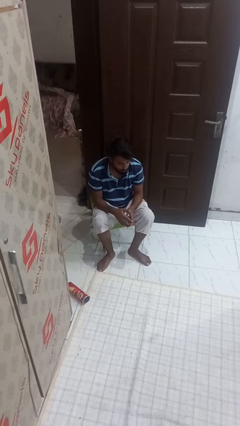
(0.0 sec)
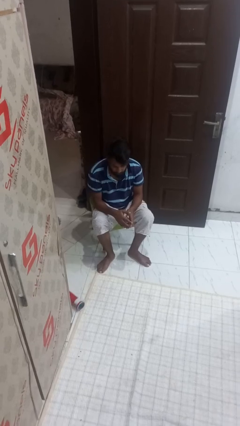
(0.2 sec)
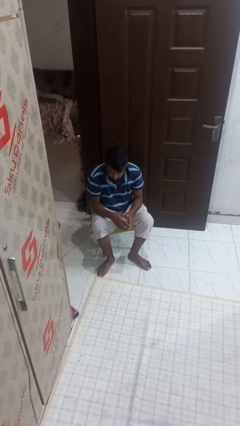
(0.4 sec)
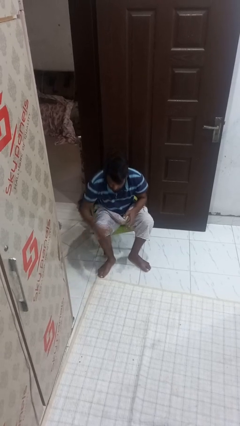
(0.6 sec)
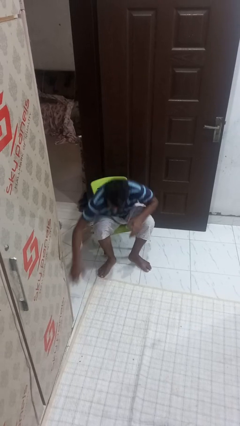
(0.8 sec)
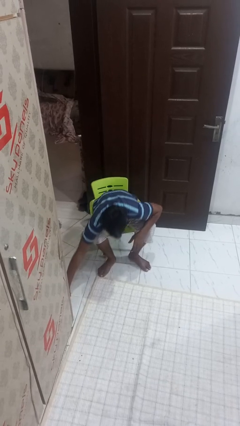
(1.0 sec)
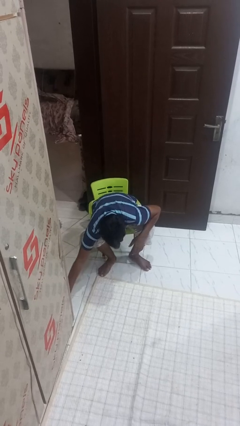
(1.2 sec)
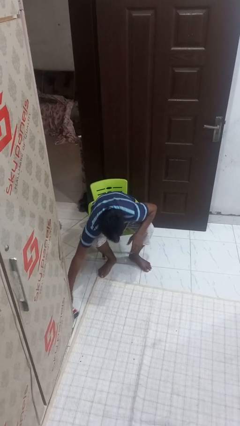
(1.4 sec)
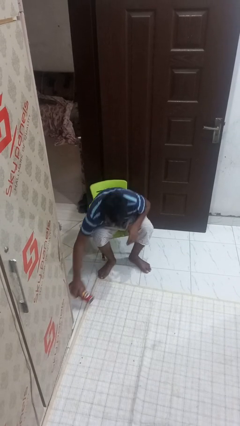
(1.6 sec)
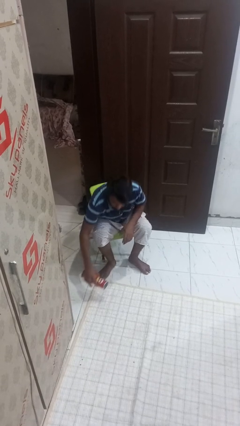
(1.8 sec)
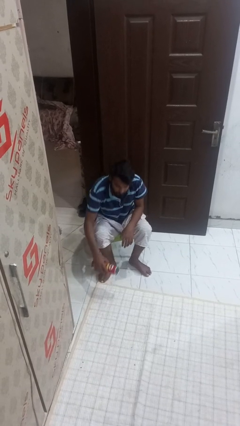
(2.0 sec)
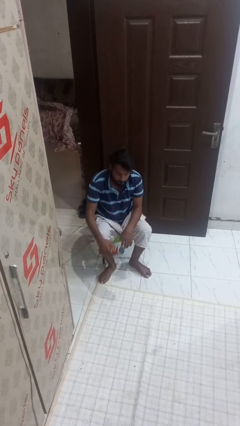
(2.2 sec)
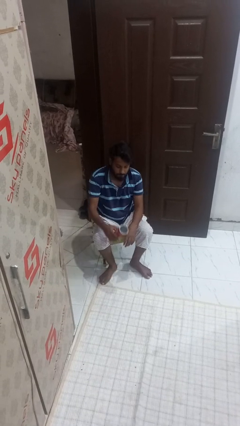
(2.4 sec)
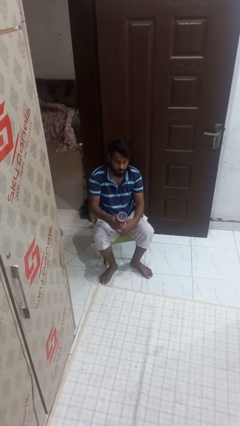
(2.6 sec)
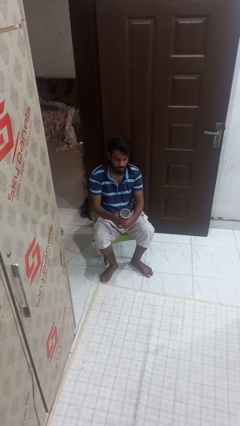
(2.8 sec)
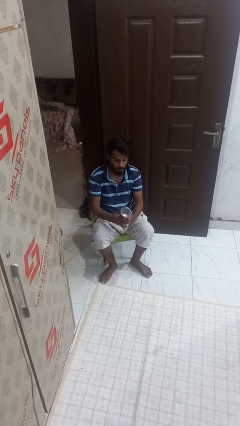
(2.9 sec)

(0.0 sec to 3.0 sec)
person picks up object from floor

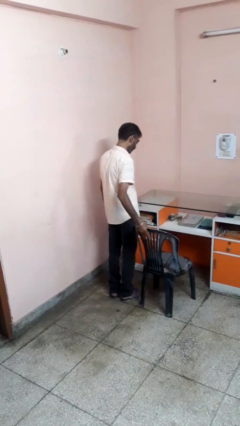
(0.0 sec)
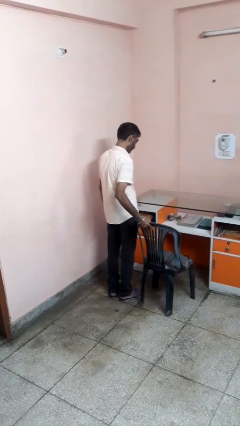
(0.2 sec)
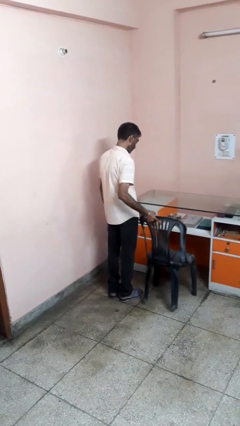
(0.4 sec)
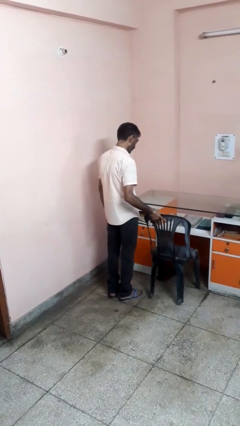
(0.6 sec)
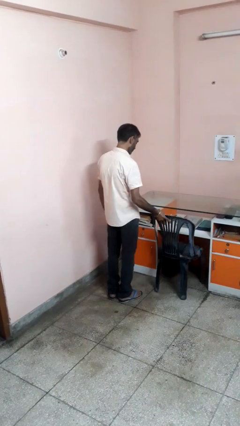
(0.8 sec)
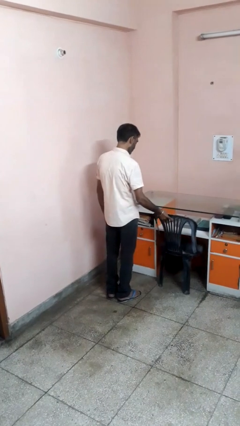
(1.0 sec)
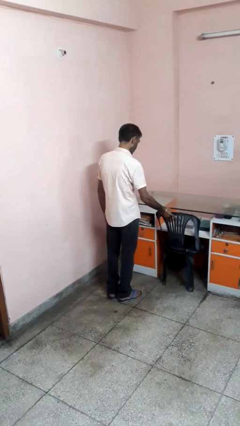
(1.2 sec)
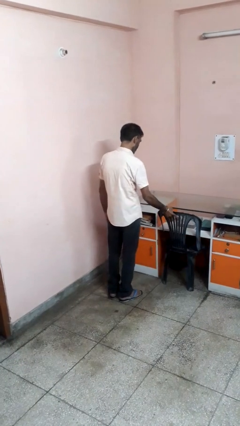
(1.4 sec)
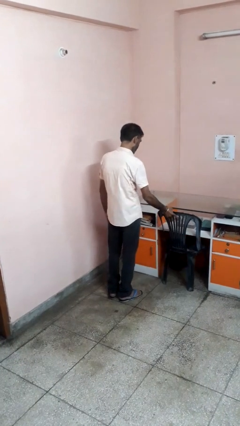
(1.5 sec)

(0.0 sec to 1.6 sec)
person pushes in chair

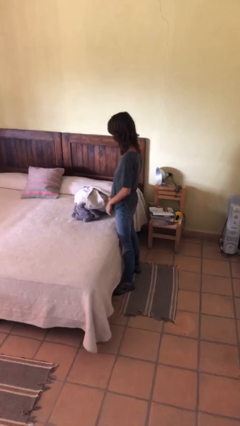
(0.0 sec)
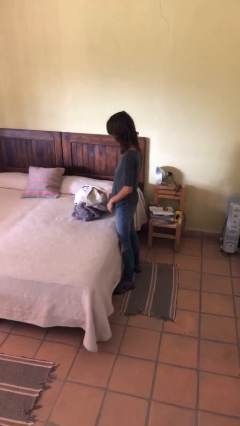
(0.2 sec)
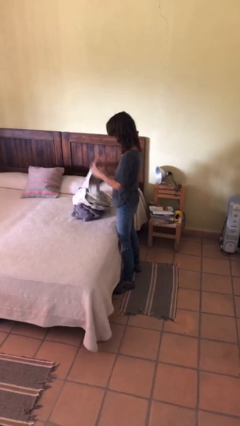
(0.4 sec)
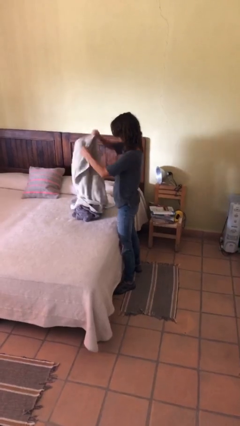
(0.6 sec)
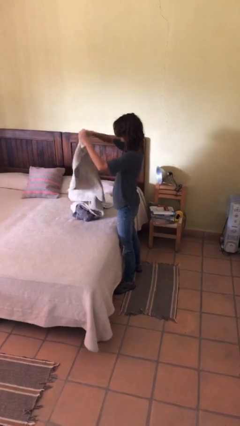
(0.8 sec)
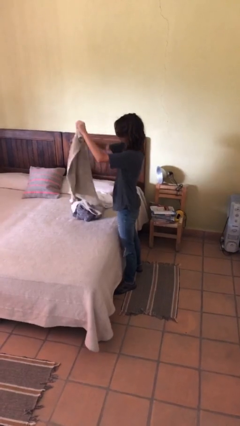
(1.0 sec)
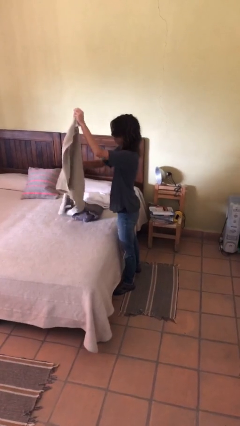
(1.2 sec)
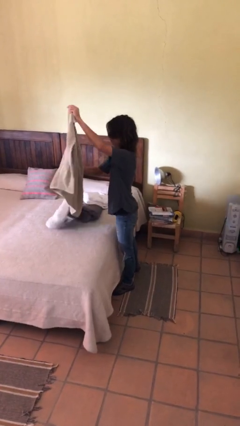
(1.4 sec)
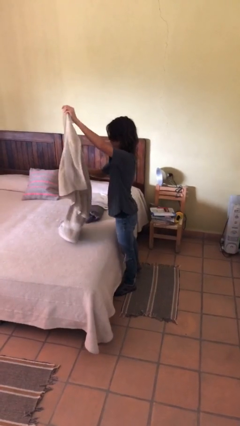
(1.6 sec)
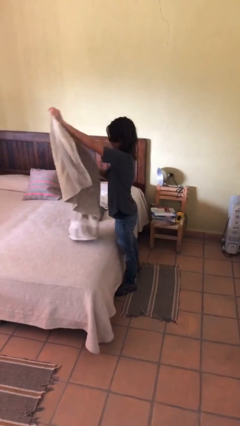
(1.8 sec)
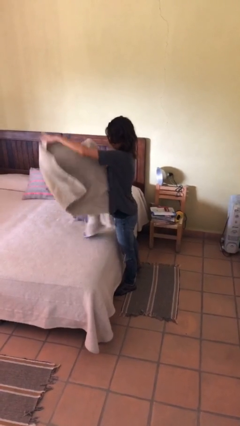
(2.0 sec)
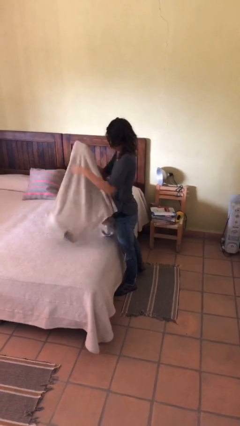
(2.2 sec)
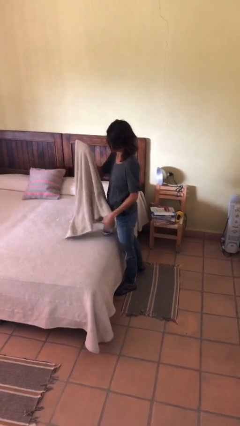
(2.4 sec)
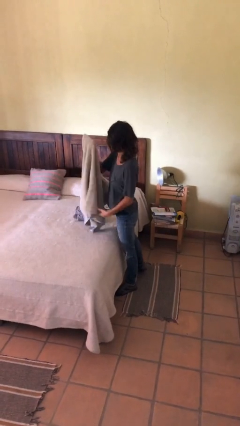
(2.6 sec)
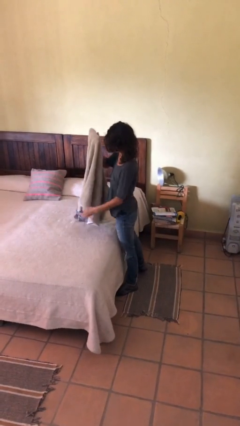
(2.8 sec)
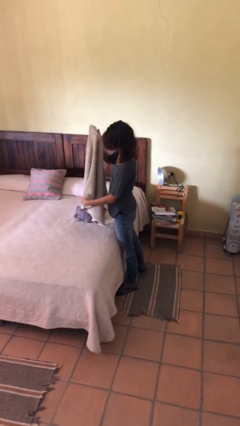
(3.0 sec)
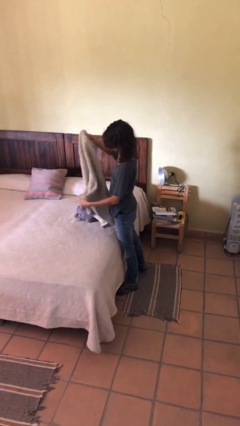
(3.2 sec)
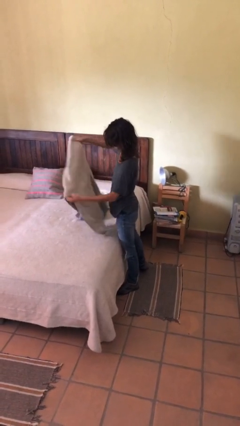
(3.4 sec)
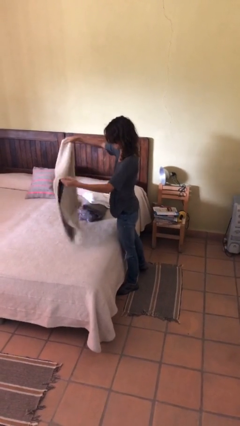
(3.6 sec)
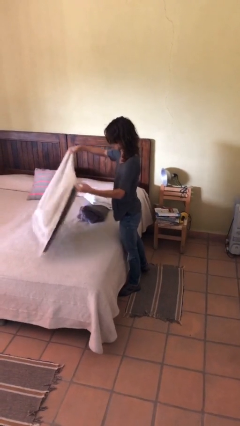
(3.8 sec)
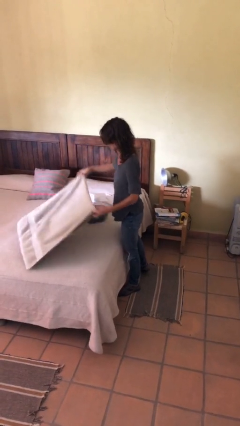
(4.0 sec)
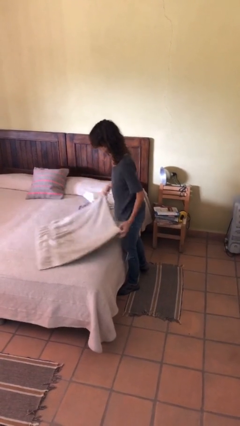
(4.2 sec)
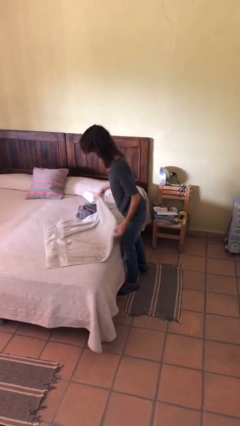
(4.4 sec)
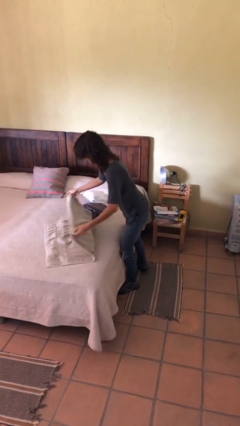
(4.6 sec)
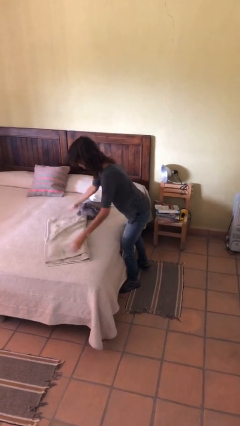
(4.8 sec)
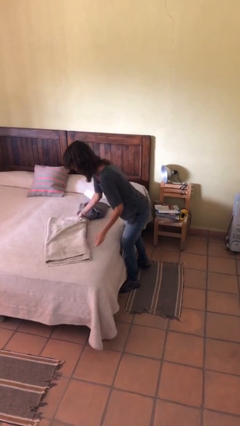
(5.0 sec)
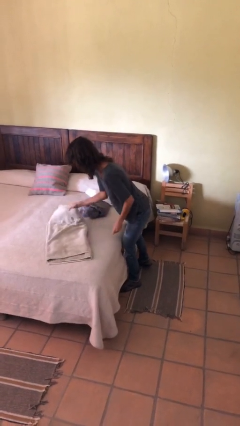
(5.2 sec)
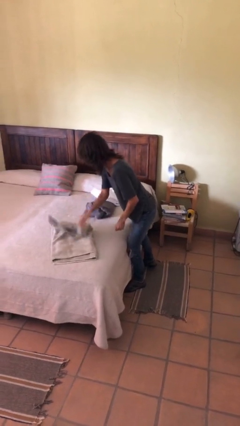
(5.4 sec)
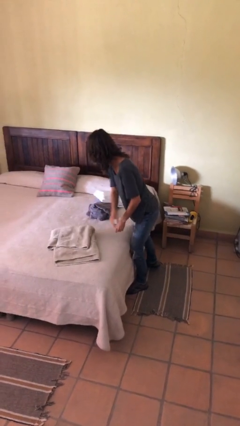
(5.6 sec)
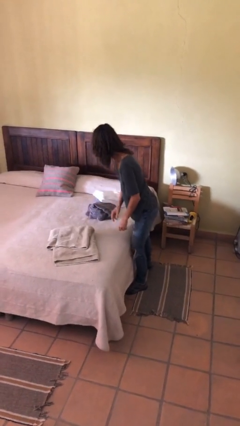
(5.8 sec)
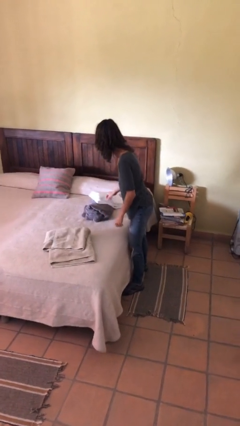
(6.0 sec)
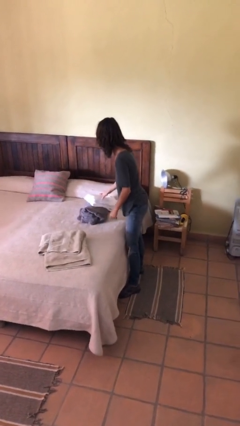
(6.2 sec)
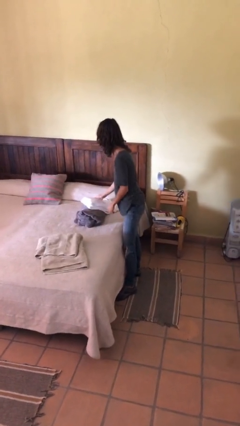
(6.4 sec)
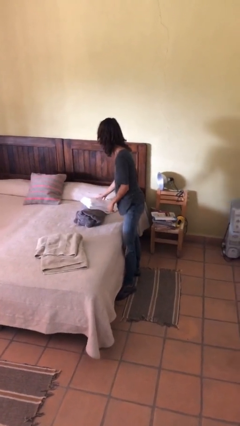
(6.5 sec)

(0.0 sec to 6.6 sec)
person folds towel

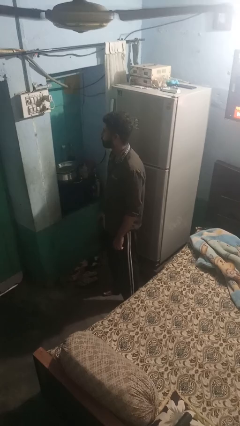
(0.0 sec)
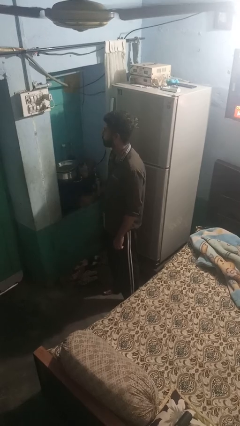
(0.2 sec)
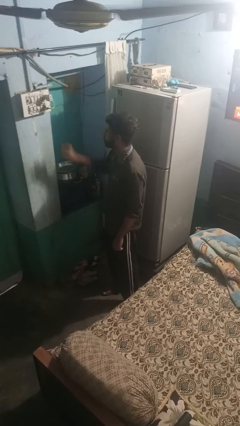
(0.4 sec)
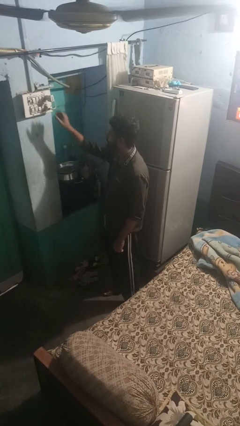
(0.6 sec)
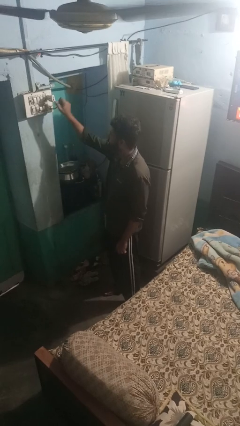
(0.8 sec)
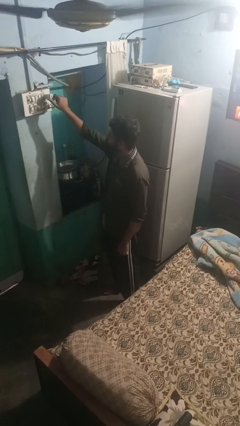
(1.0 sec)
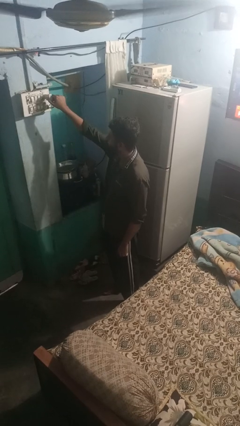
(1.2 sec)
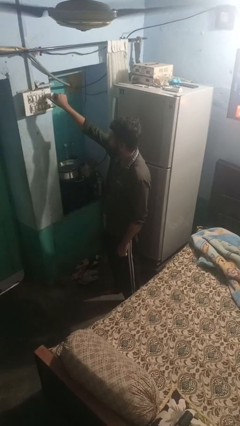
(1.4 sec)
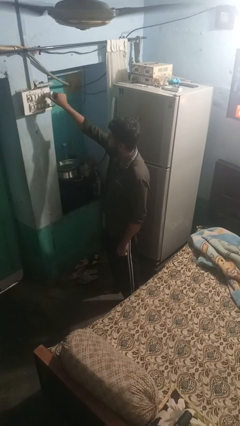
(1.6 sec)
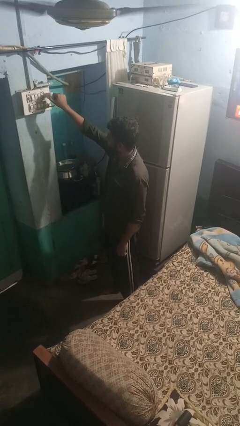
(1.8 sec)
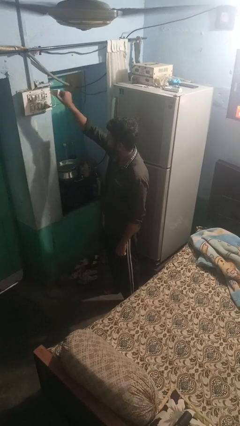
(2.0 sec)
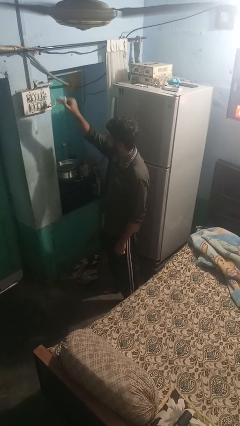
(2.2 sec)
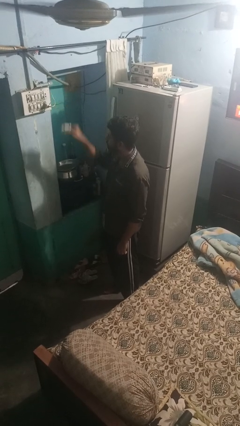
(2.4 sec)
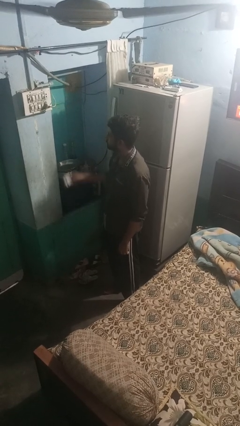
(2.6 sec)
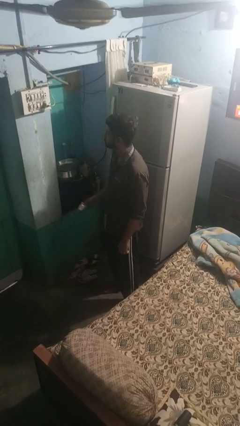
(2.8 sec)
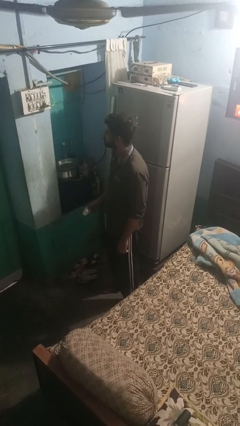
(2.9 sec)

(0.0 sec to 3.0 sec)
person unplugs from electrical socket

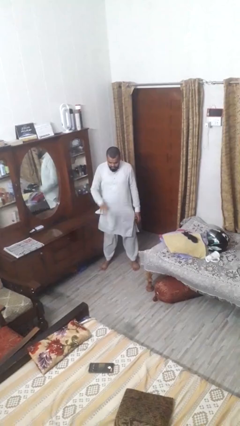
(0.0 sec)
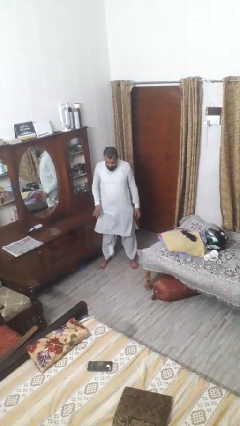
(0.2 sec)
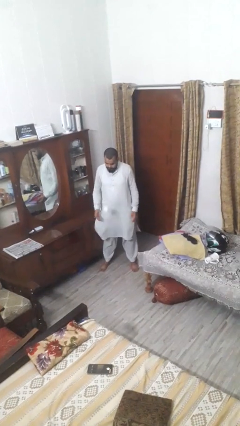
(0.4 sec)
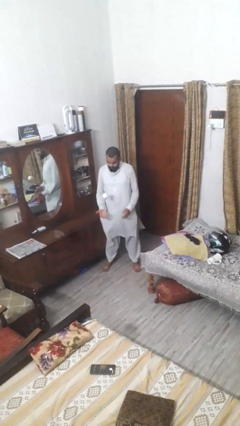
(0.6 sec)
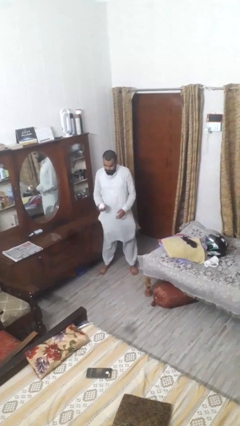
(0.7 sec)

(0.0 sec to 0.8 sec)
person bounces ball on floor

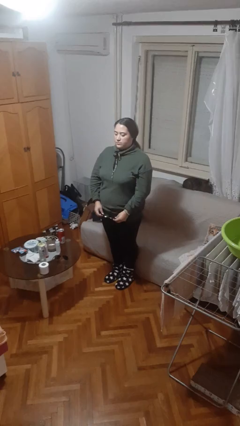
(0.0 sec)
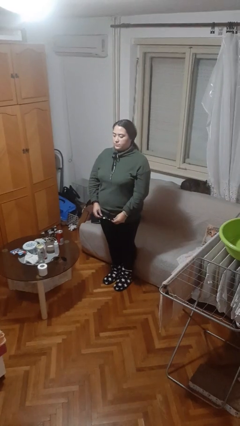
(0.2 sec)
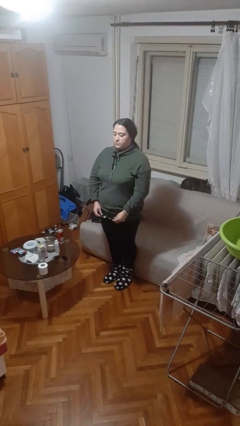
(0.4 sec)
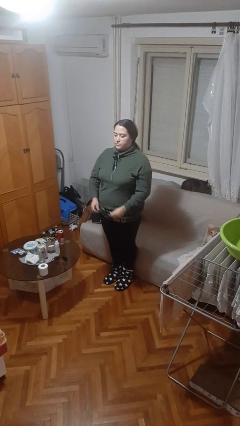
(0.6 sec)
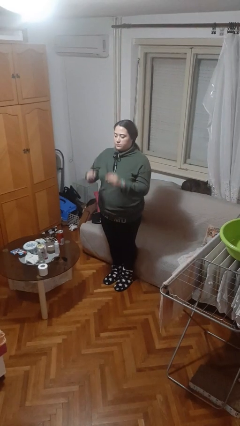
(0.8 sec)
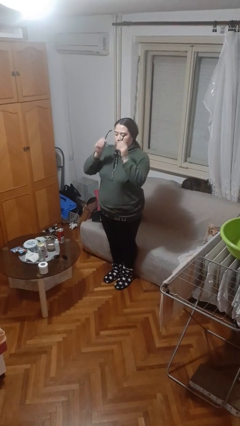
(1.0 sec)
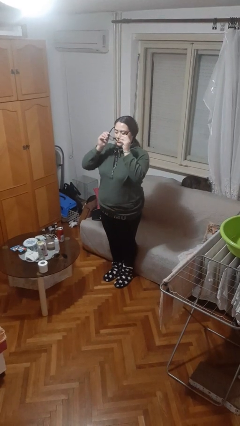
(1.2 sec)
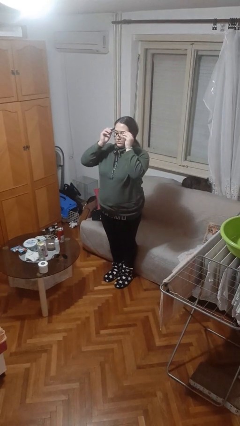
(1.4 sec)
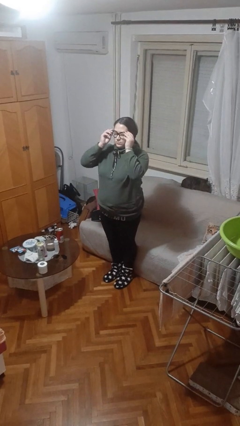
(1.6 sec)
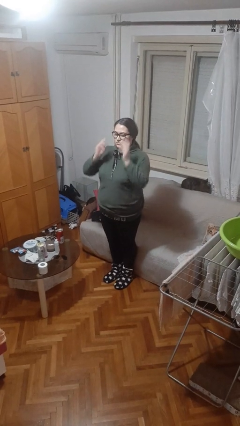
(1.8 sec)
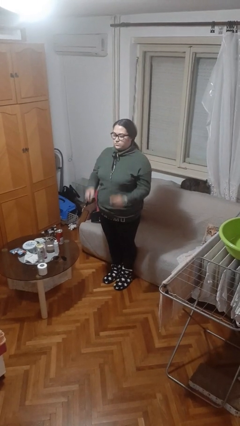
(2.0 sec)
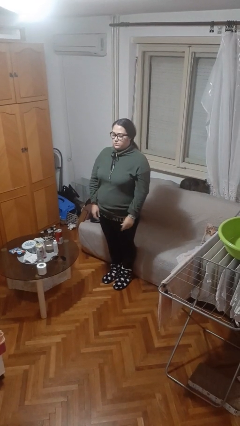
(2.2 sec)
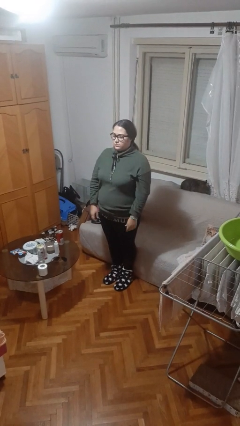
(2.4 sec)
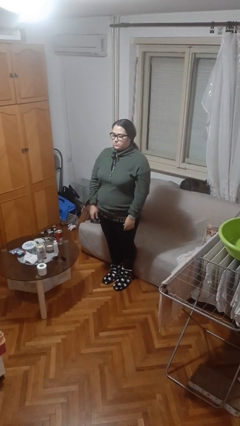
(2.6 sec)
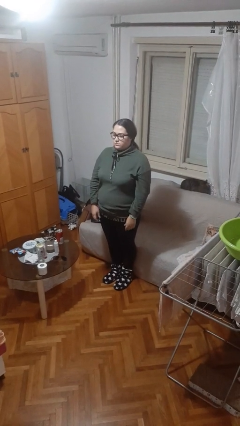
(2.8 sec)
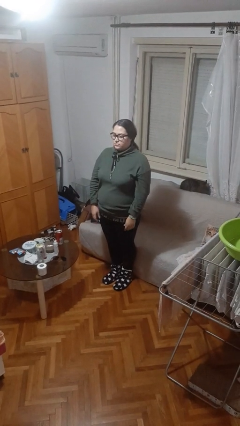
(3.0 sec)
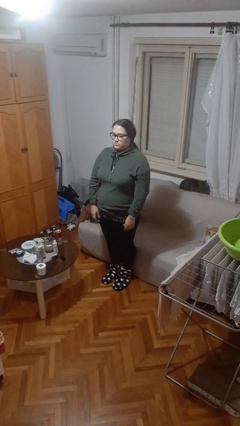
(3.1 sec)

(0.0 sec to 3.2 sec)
person puts on glasses
